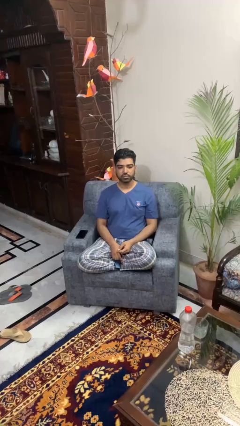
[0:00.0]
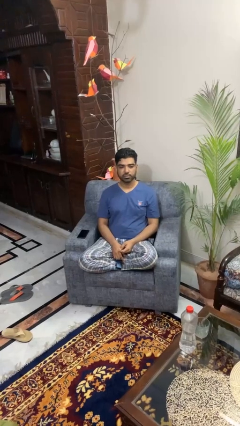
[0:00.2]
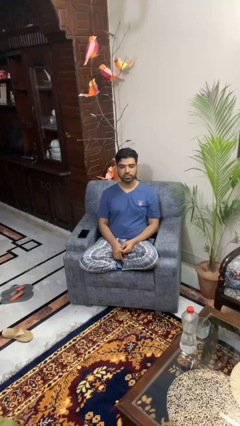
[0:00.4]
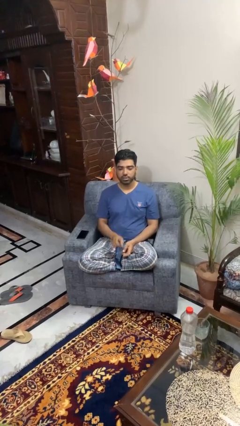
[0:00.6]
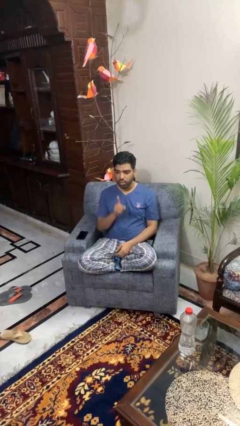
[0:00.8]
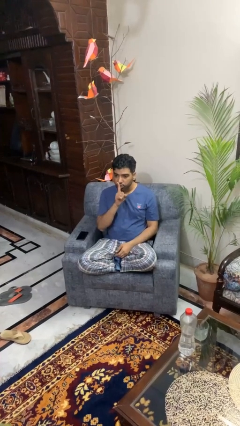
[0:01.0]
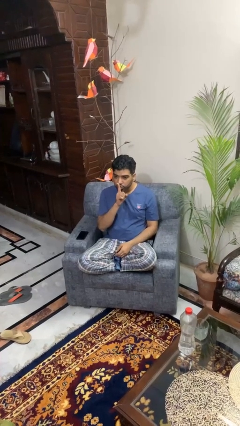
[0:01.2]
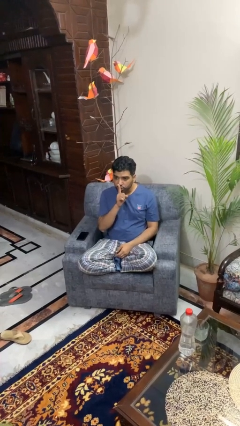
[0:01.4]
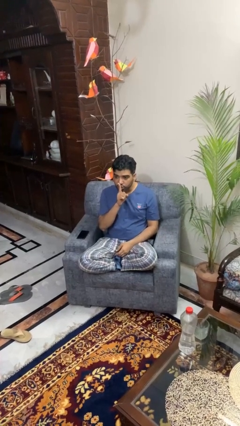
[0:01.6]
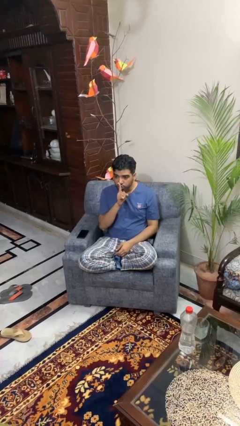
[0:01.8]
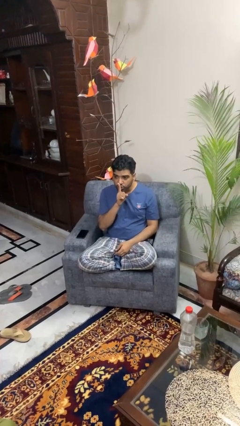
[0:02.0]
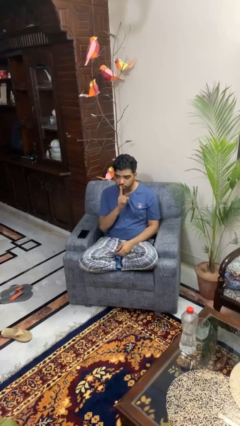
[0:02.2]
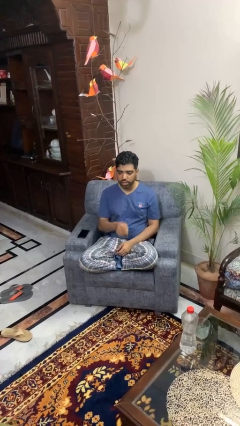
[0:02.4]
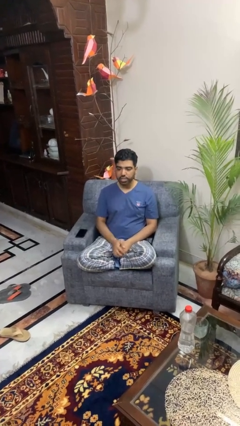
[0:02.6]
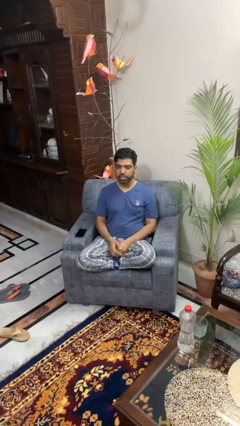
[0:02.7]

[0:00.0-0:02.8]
person gestures be quiet

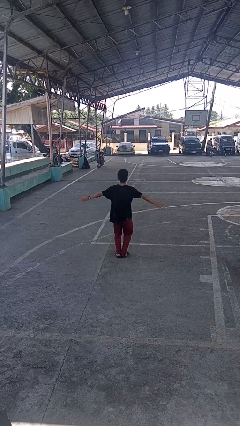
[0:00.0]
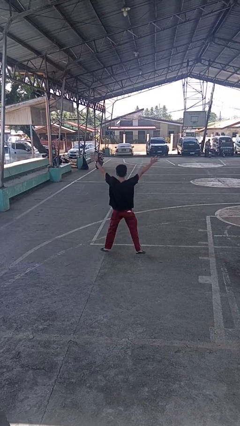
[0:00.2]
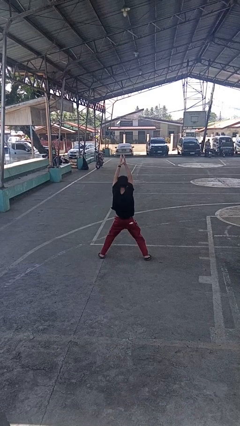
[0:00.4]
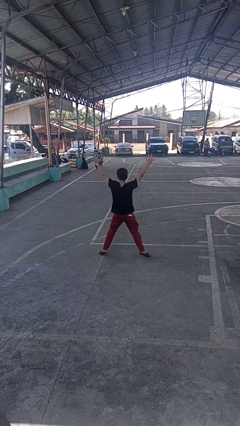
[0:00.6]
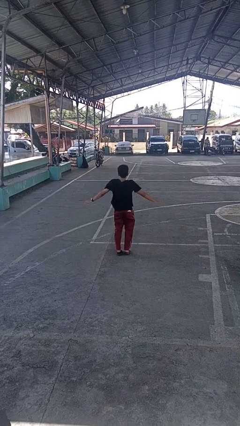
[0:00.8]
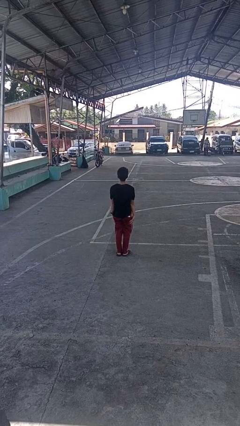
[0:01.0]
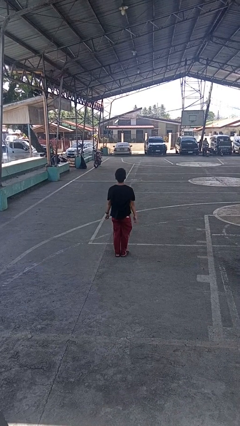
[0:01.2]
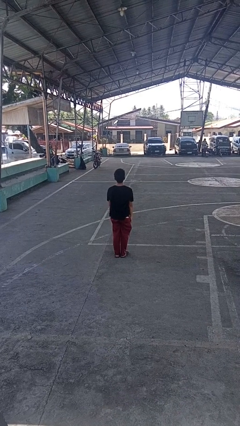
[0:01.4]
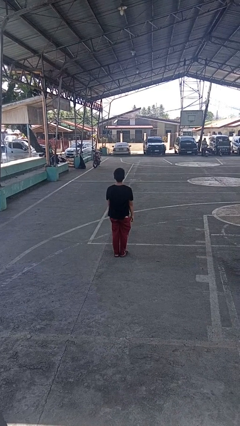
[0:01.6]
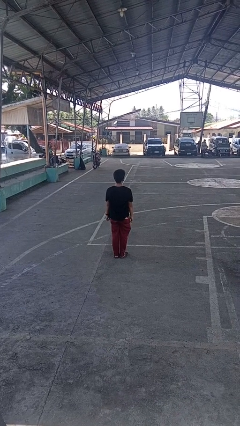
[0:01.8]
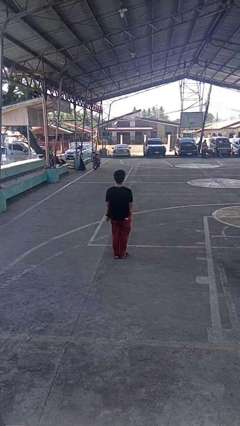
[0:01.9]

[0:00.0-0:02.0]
person exercises with jumping jacks

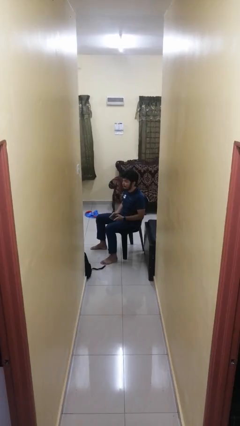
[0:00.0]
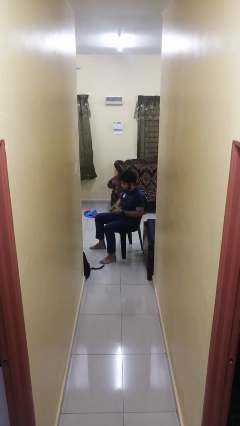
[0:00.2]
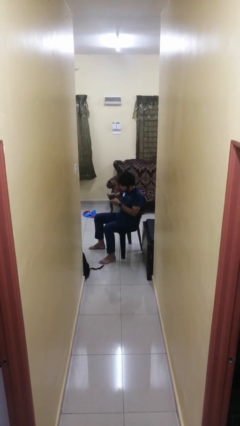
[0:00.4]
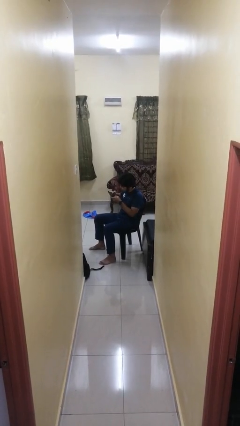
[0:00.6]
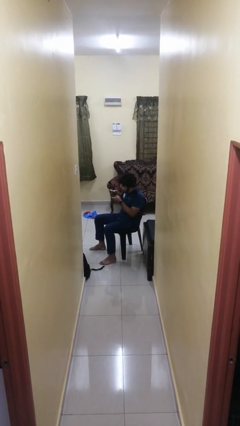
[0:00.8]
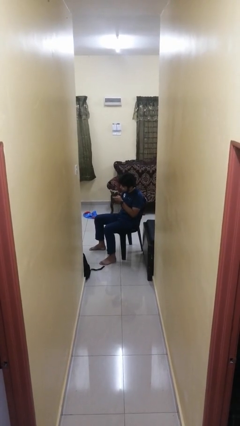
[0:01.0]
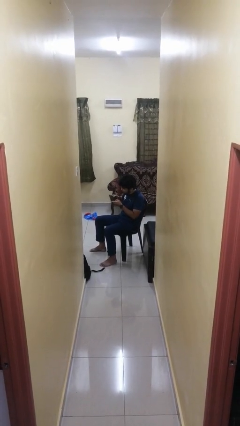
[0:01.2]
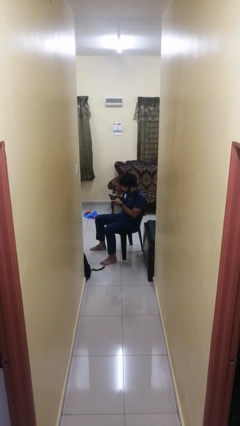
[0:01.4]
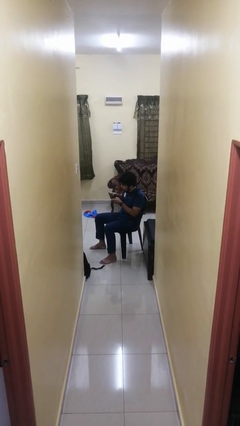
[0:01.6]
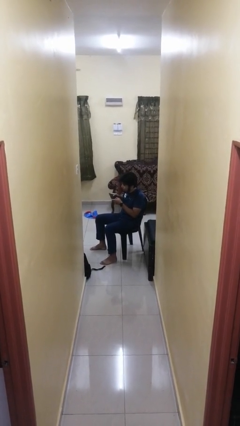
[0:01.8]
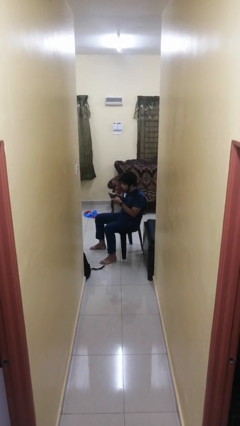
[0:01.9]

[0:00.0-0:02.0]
person interacts with handheld game

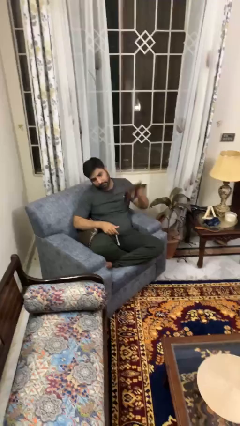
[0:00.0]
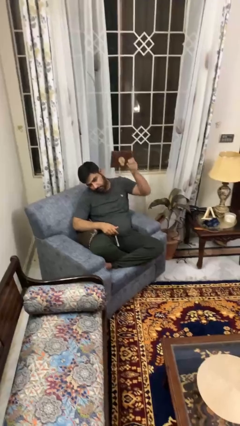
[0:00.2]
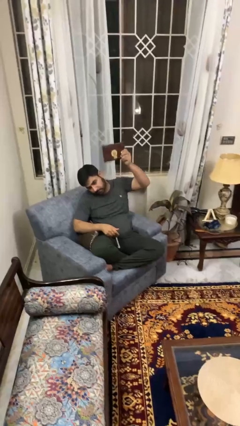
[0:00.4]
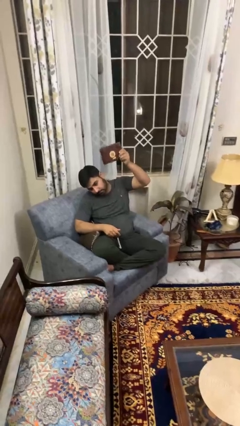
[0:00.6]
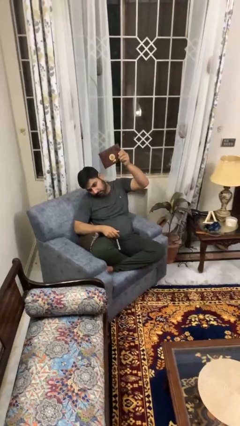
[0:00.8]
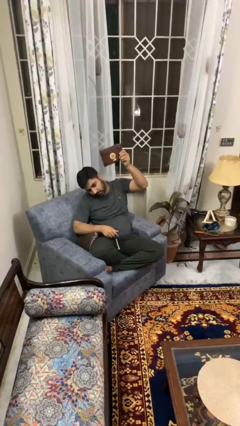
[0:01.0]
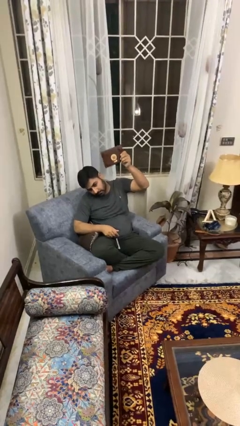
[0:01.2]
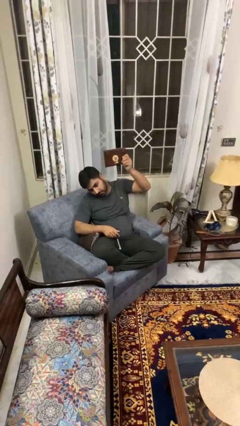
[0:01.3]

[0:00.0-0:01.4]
person holds object above head

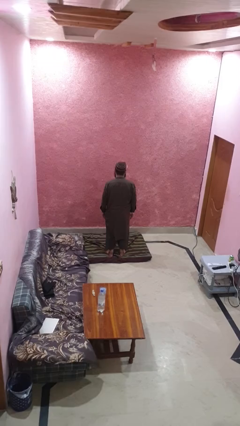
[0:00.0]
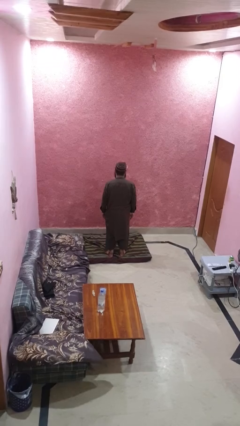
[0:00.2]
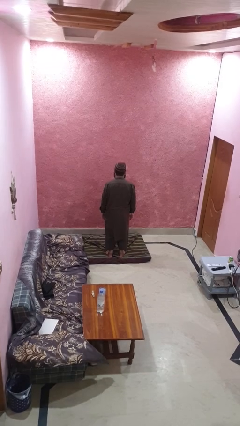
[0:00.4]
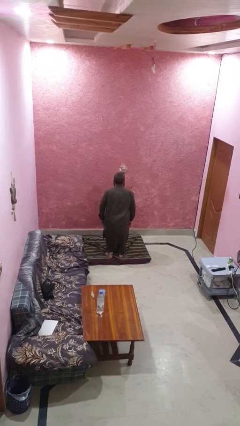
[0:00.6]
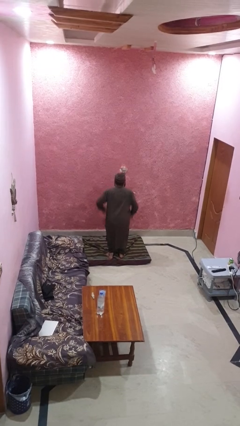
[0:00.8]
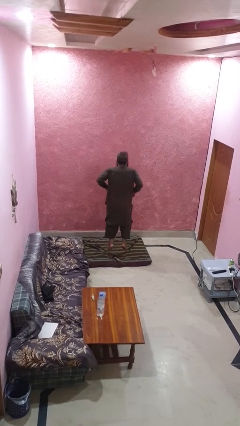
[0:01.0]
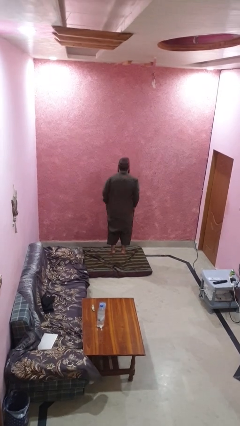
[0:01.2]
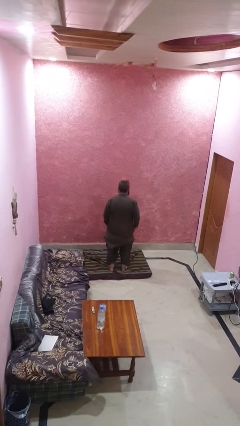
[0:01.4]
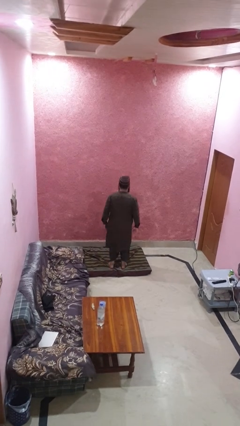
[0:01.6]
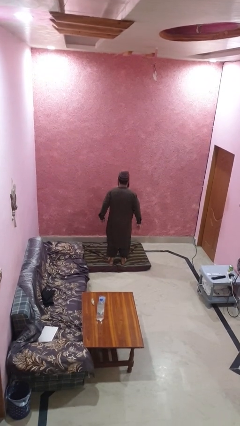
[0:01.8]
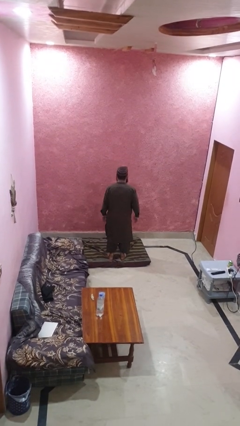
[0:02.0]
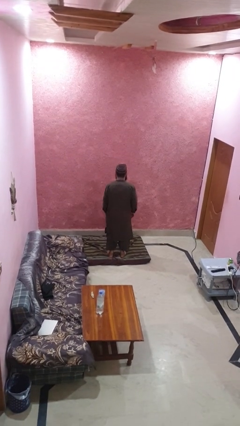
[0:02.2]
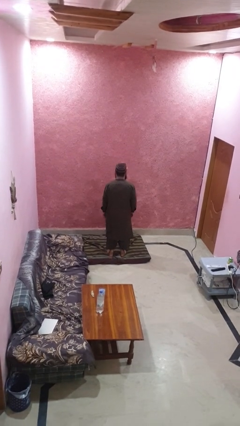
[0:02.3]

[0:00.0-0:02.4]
person jumps

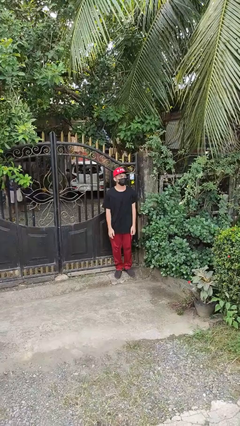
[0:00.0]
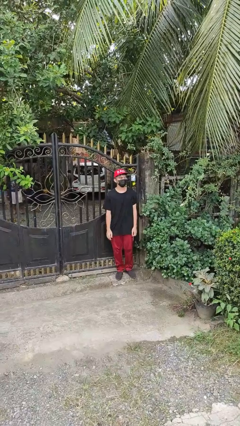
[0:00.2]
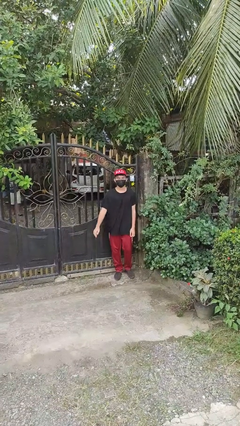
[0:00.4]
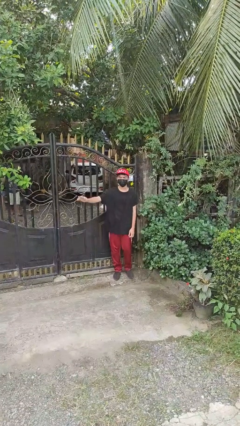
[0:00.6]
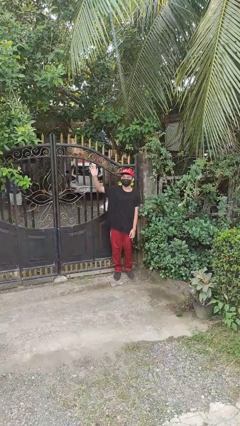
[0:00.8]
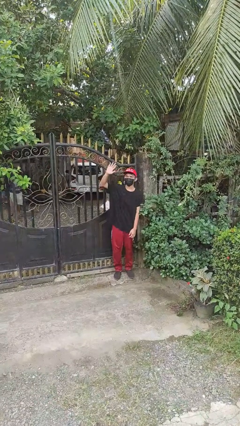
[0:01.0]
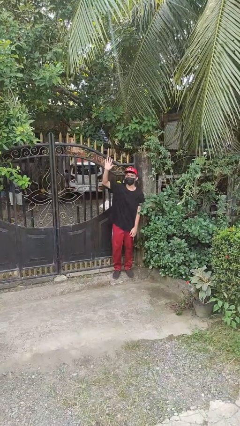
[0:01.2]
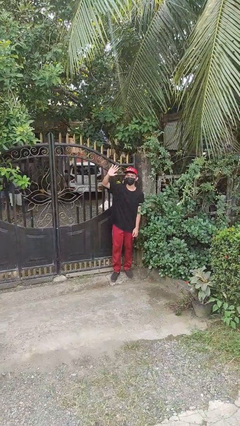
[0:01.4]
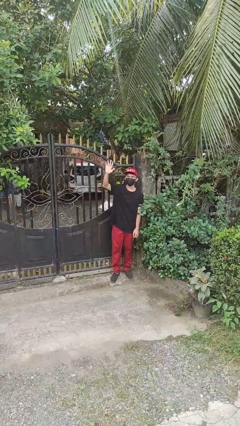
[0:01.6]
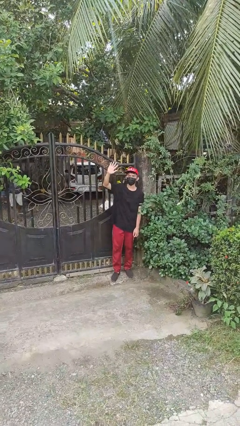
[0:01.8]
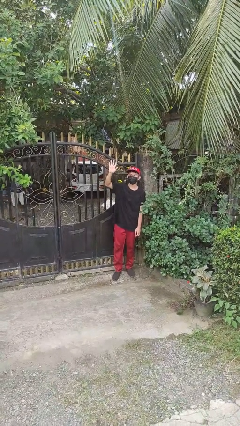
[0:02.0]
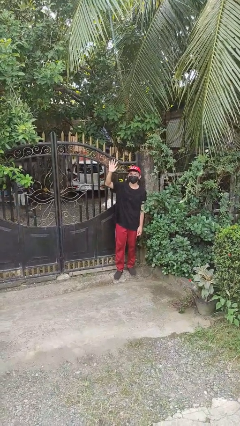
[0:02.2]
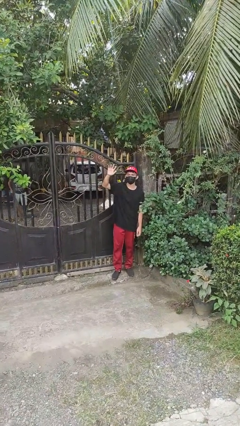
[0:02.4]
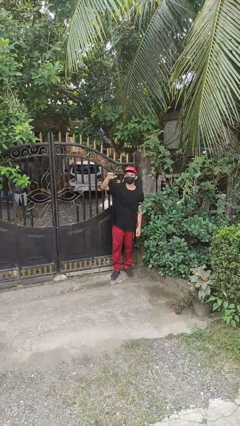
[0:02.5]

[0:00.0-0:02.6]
person waves at person

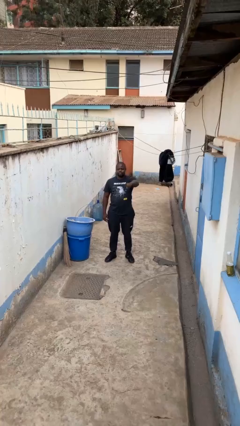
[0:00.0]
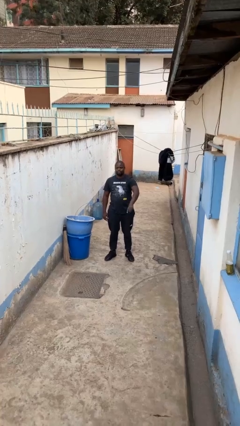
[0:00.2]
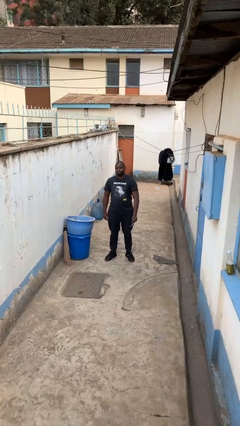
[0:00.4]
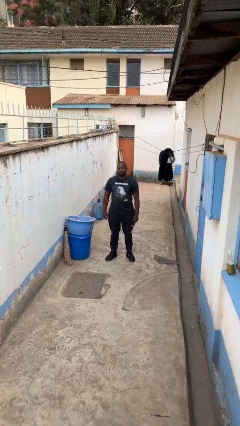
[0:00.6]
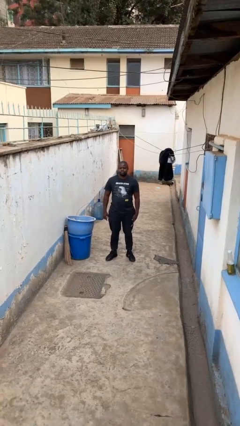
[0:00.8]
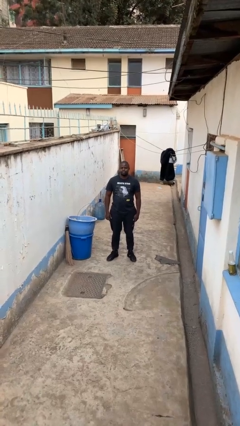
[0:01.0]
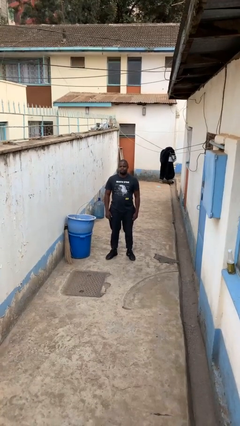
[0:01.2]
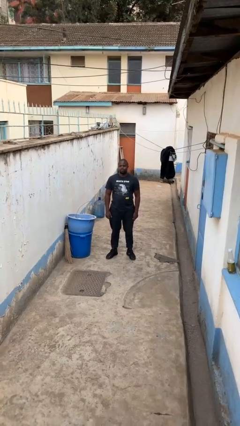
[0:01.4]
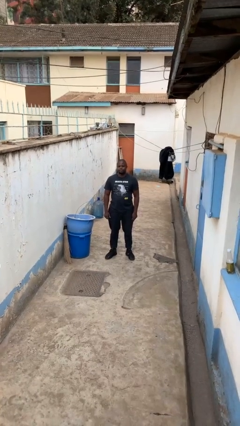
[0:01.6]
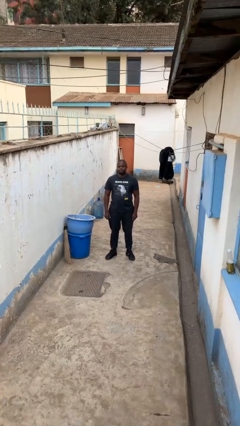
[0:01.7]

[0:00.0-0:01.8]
person gestures swipe down

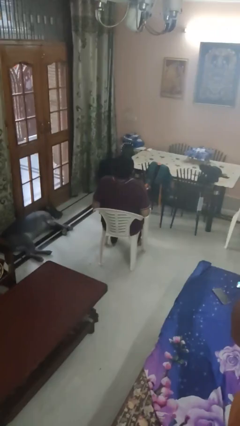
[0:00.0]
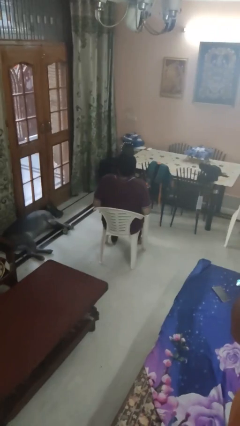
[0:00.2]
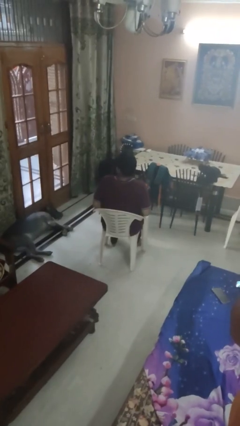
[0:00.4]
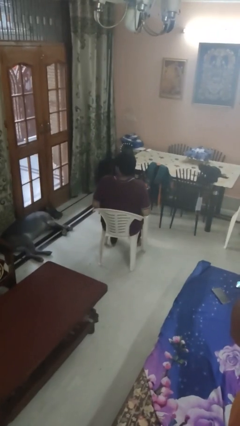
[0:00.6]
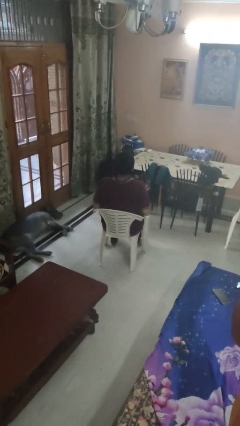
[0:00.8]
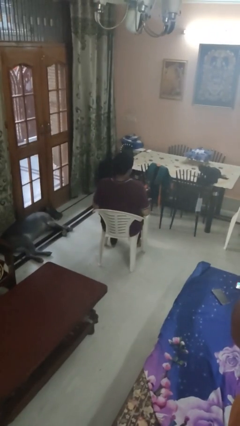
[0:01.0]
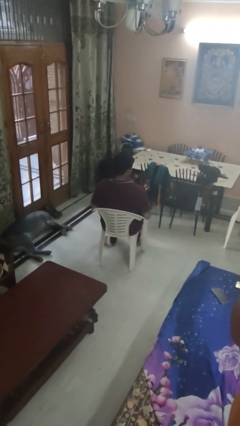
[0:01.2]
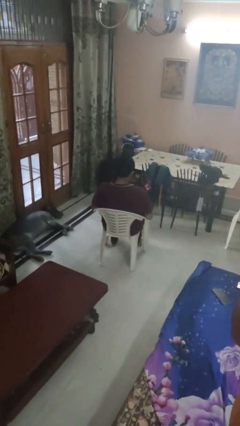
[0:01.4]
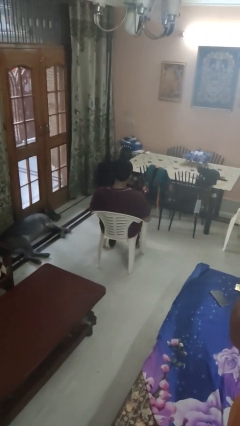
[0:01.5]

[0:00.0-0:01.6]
person shrugs
